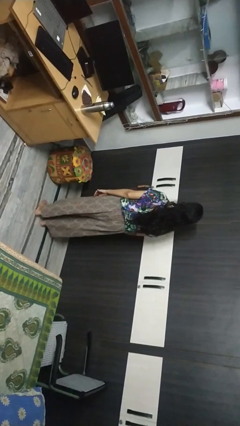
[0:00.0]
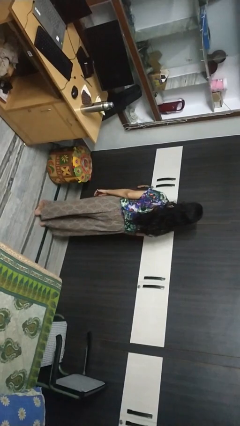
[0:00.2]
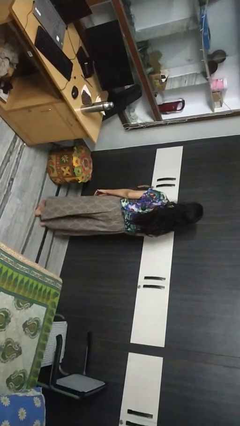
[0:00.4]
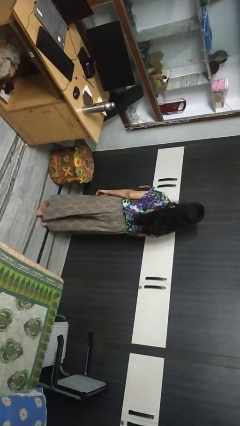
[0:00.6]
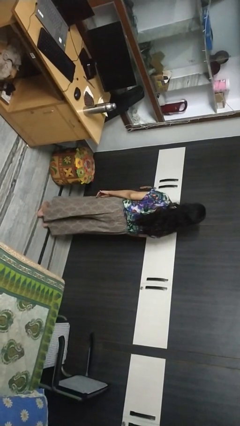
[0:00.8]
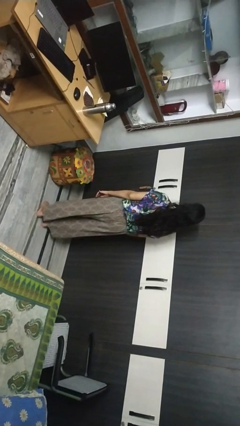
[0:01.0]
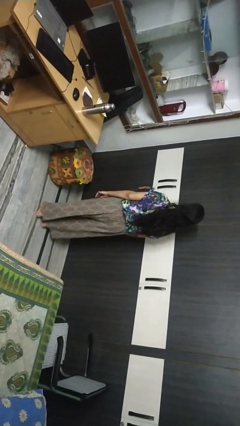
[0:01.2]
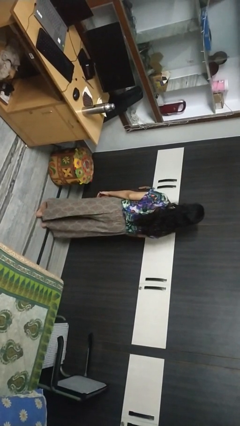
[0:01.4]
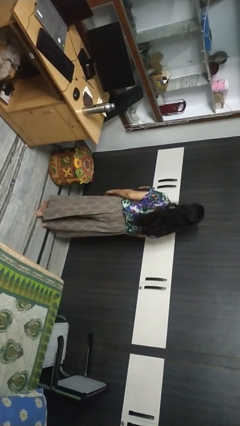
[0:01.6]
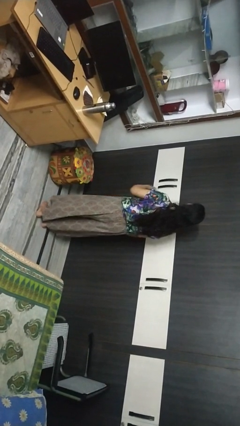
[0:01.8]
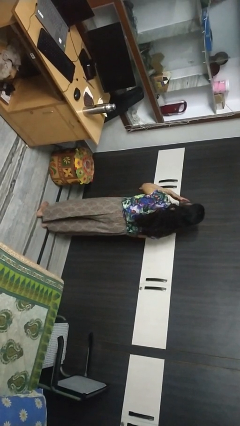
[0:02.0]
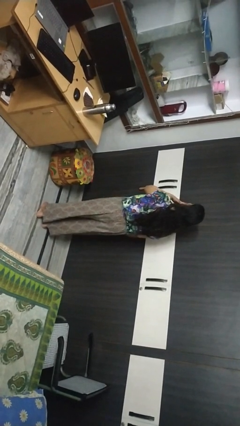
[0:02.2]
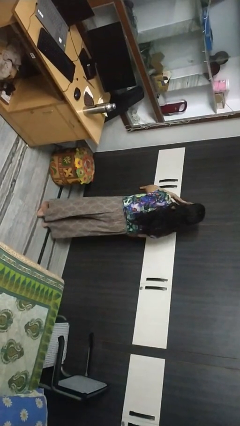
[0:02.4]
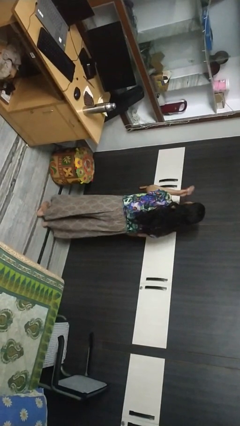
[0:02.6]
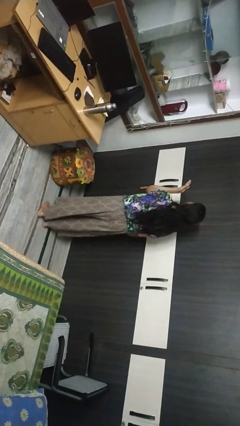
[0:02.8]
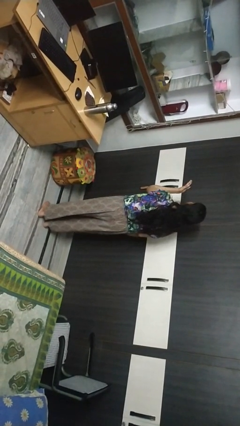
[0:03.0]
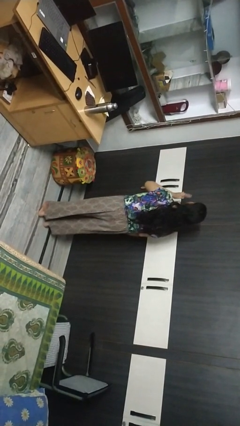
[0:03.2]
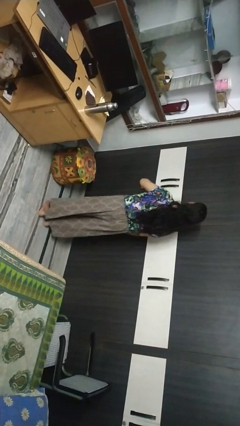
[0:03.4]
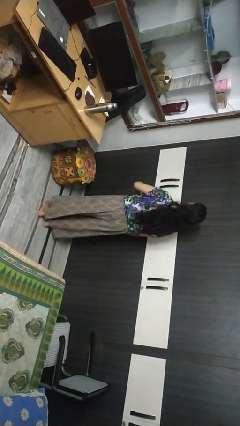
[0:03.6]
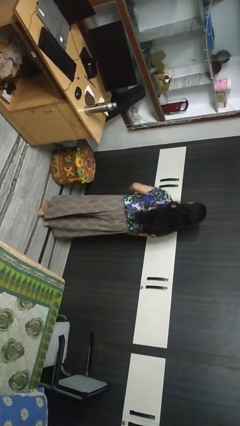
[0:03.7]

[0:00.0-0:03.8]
person gestures blow kiss

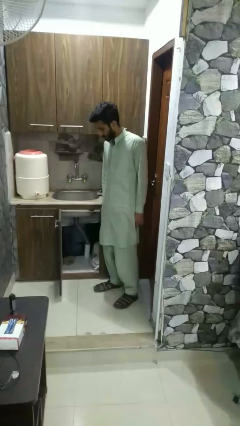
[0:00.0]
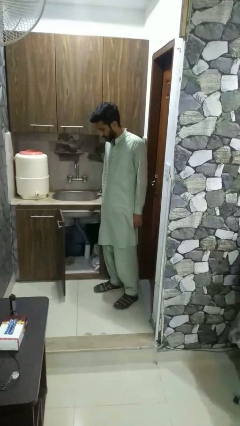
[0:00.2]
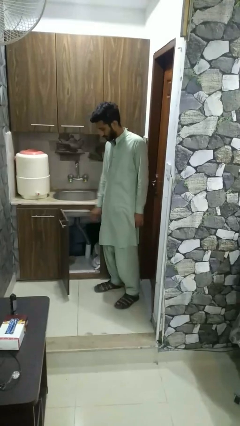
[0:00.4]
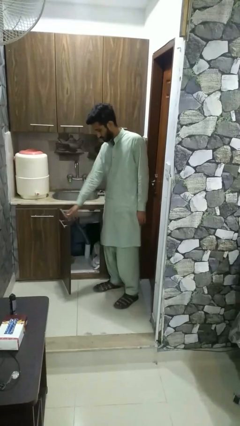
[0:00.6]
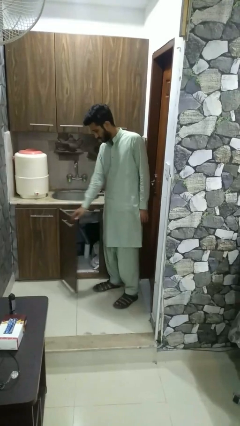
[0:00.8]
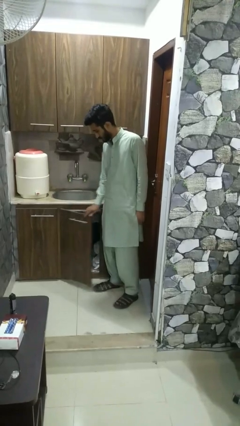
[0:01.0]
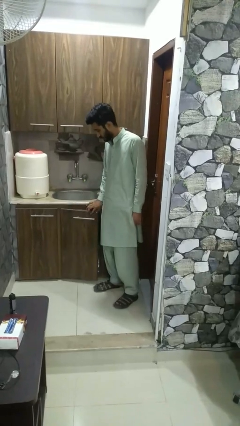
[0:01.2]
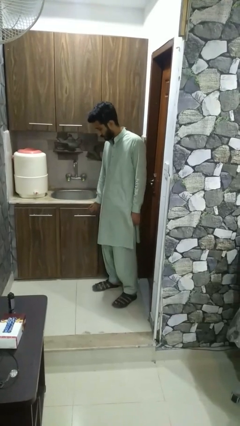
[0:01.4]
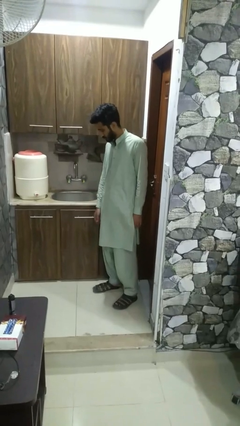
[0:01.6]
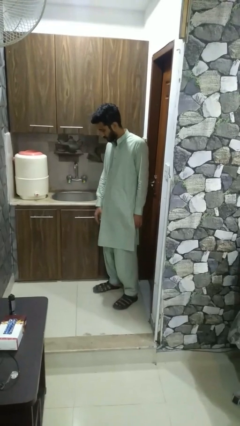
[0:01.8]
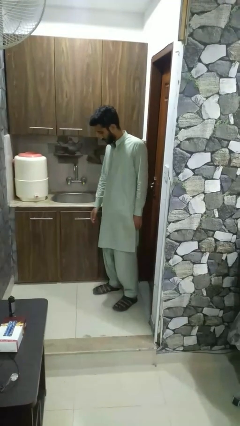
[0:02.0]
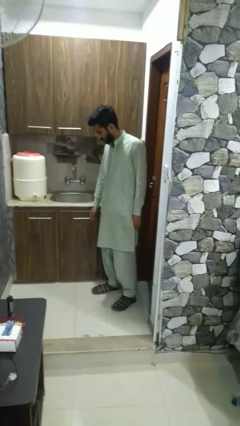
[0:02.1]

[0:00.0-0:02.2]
person closes closet door

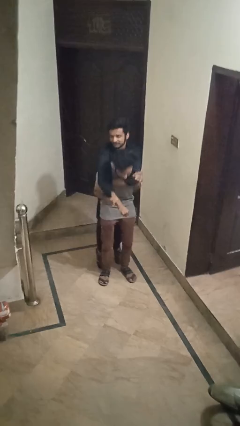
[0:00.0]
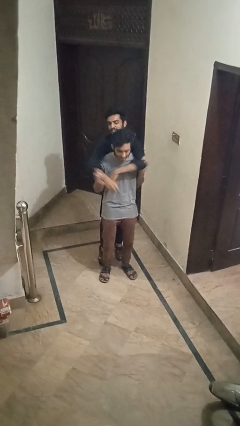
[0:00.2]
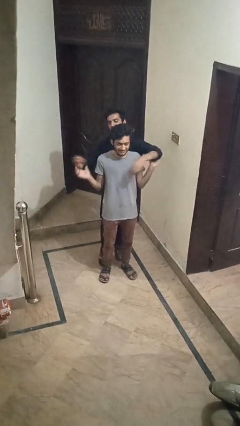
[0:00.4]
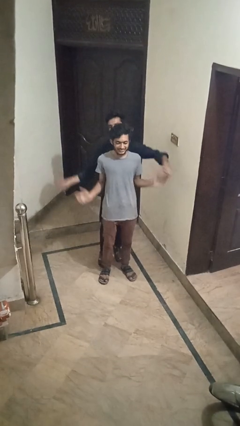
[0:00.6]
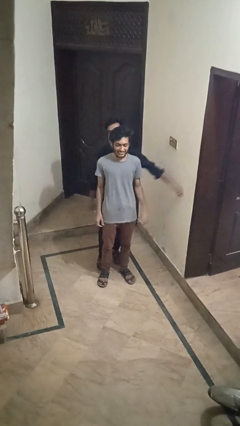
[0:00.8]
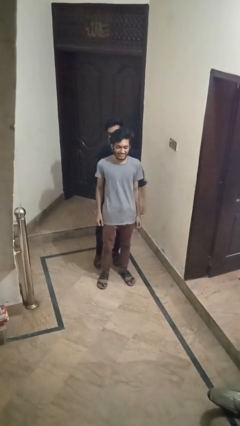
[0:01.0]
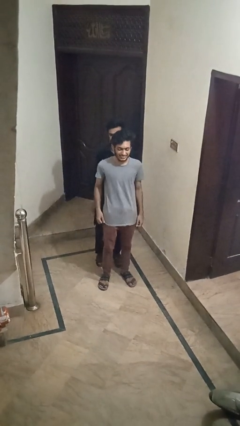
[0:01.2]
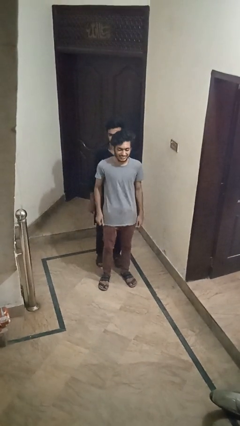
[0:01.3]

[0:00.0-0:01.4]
person puts down person

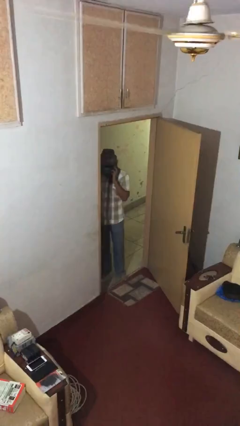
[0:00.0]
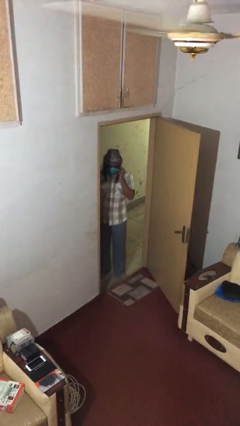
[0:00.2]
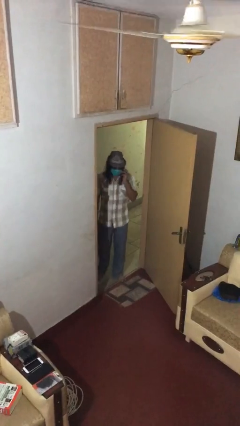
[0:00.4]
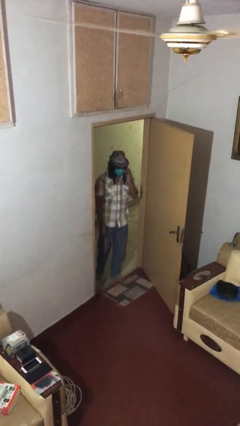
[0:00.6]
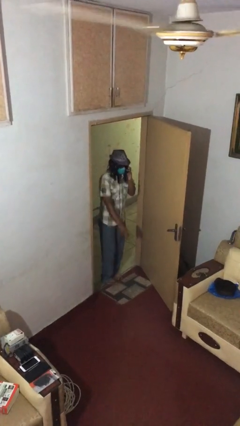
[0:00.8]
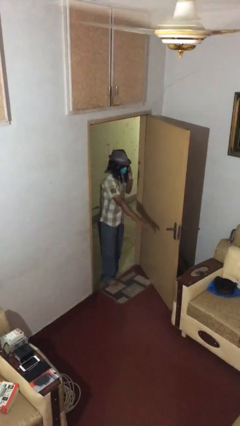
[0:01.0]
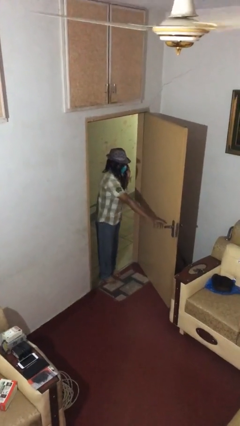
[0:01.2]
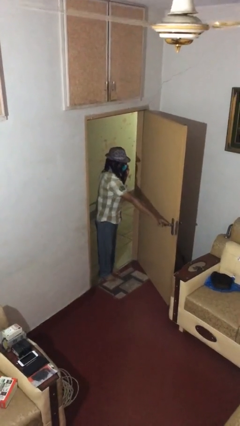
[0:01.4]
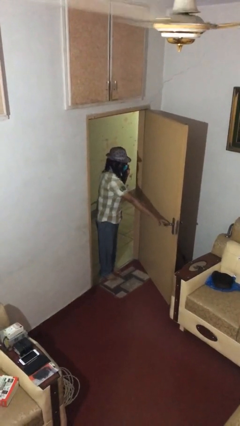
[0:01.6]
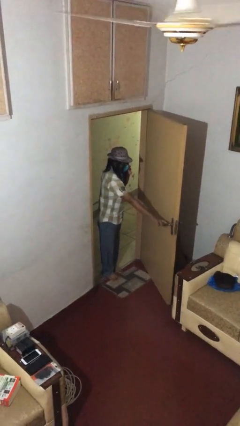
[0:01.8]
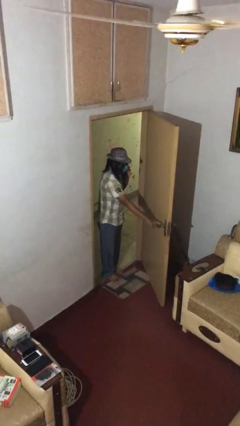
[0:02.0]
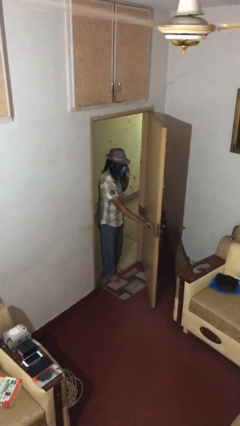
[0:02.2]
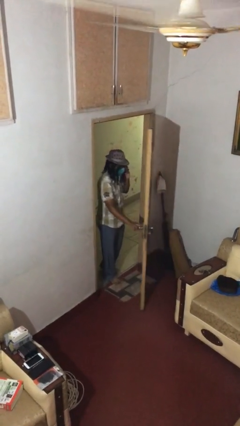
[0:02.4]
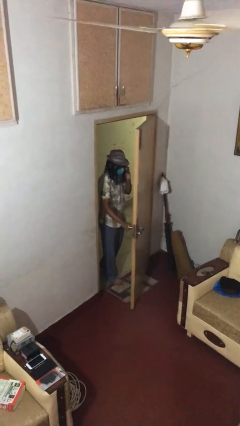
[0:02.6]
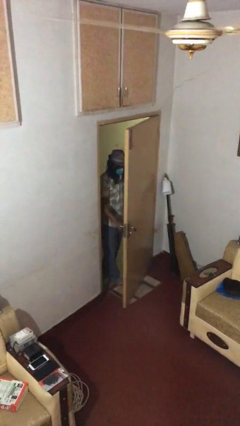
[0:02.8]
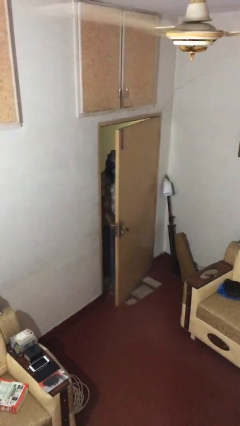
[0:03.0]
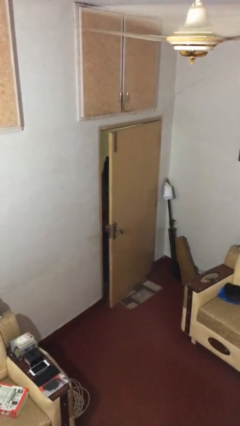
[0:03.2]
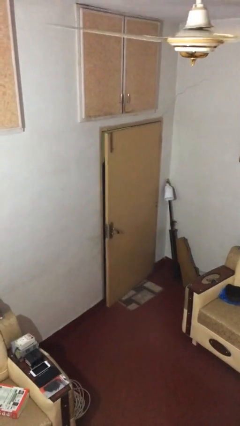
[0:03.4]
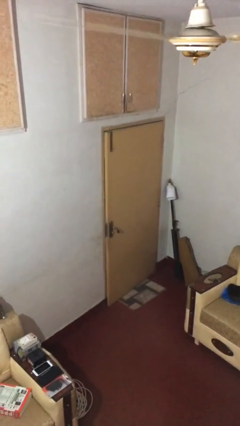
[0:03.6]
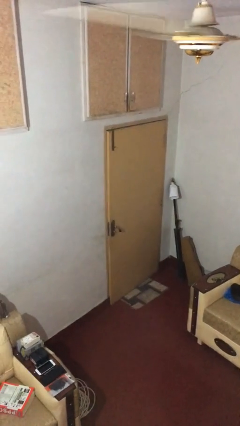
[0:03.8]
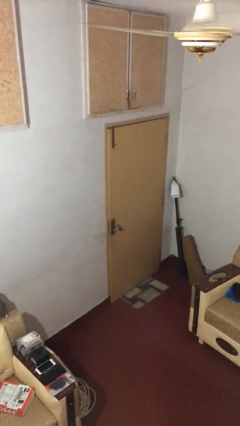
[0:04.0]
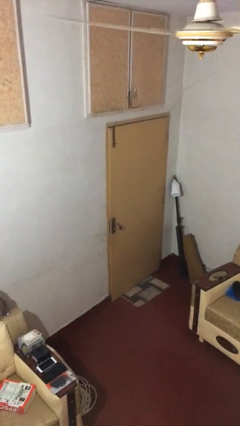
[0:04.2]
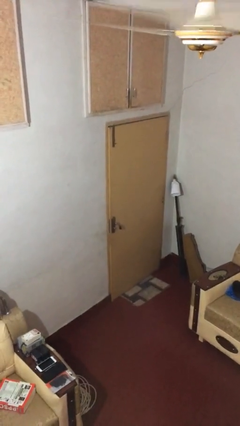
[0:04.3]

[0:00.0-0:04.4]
person closes facility door

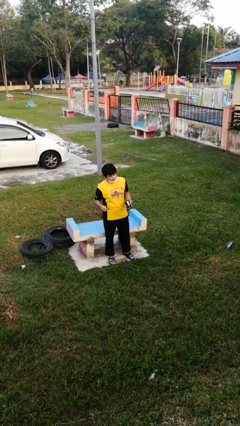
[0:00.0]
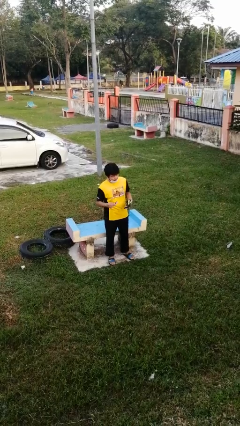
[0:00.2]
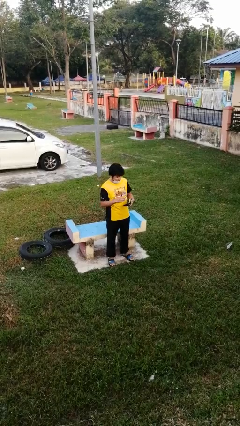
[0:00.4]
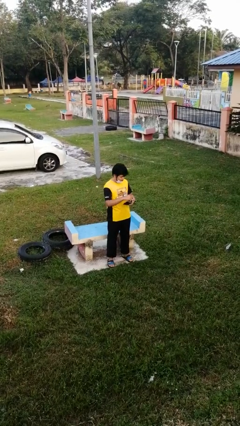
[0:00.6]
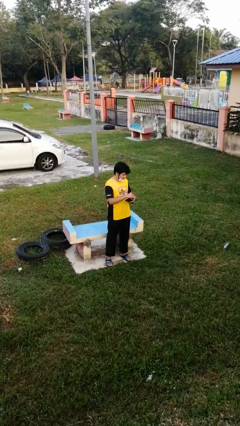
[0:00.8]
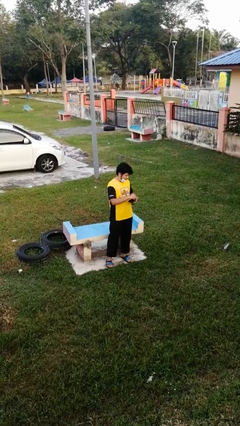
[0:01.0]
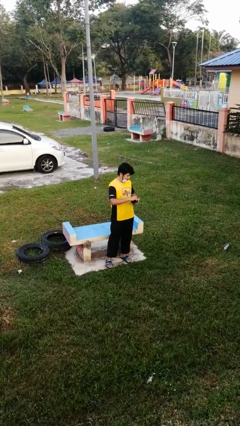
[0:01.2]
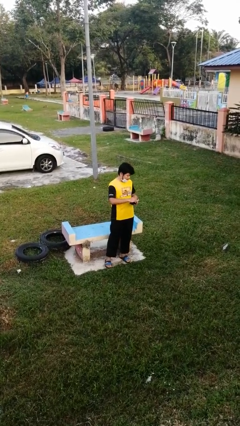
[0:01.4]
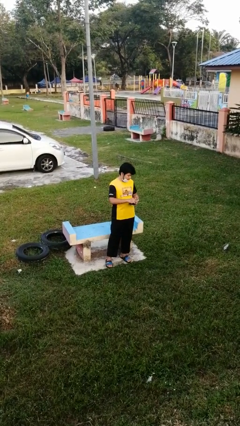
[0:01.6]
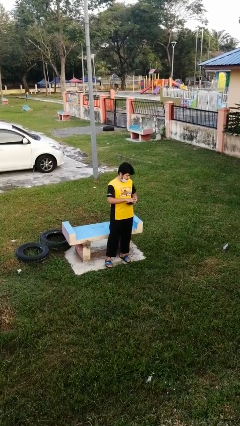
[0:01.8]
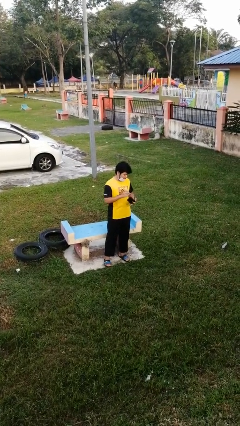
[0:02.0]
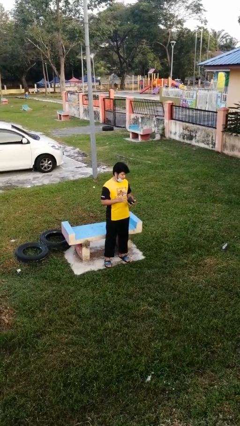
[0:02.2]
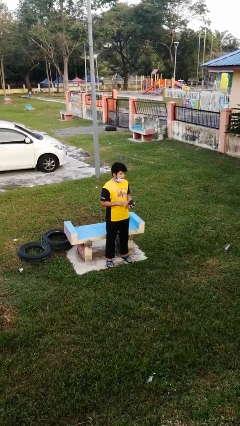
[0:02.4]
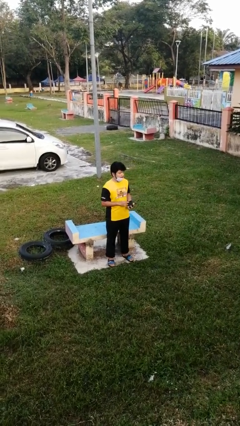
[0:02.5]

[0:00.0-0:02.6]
person puts object into purse

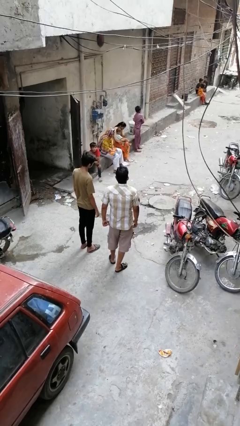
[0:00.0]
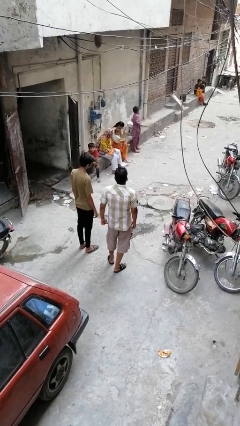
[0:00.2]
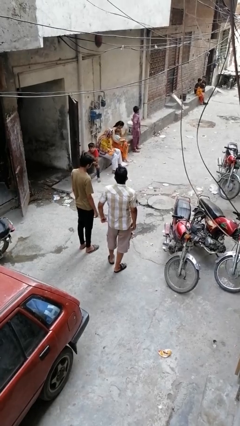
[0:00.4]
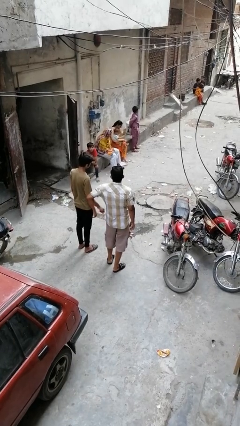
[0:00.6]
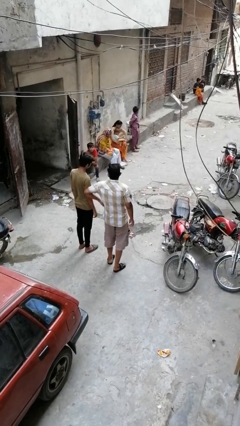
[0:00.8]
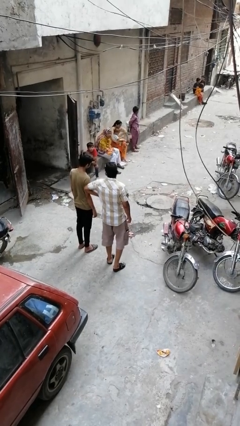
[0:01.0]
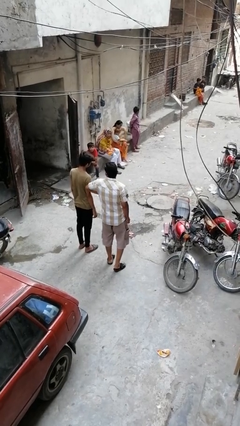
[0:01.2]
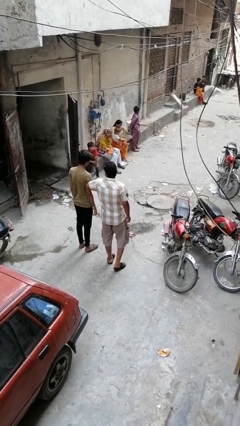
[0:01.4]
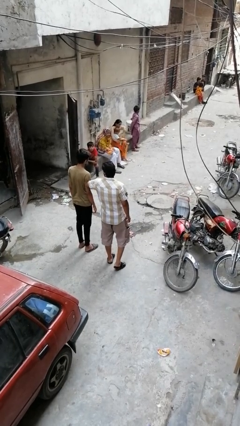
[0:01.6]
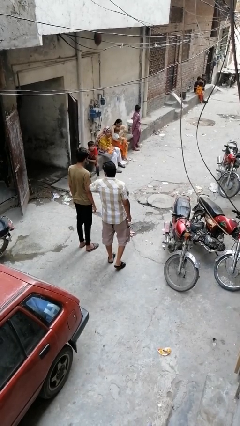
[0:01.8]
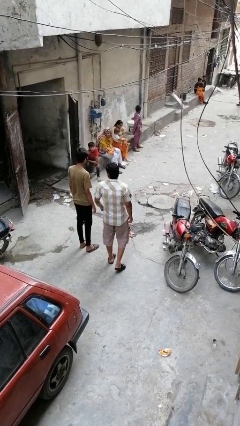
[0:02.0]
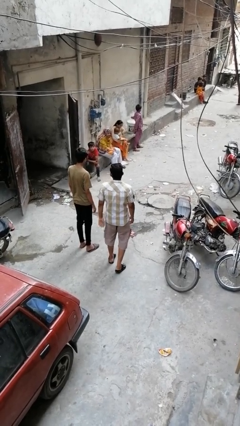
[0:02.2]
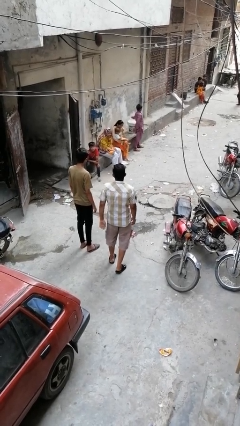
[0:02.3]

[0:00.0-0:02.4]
person nudges person with elbow

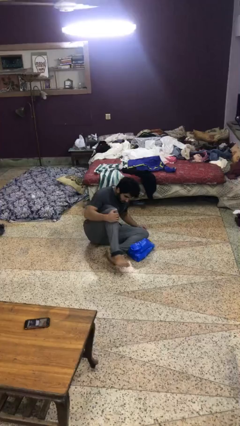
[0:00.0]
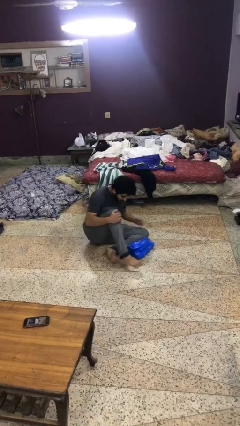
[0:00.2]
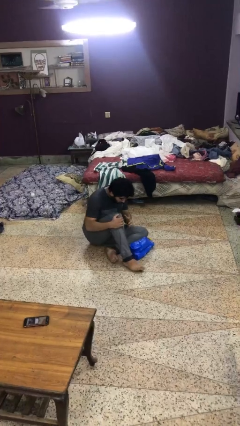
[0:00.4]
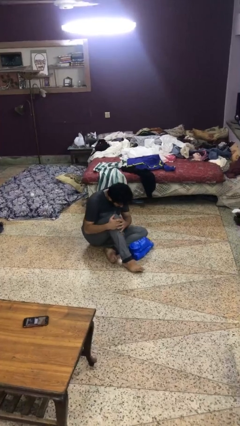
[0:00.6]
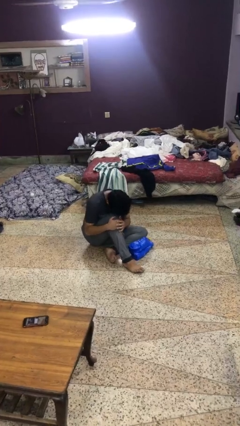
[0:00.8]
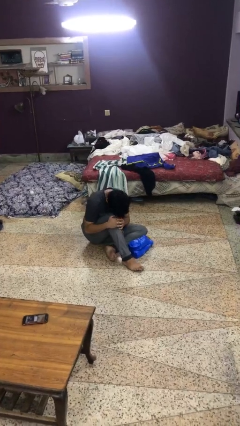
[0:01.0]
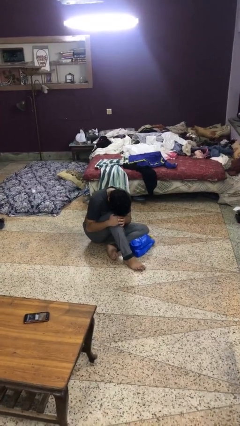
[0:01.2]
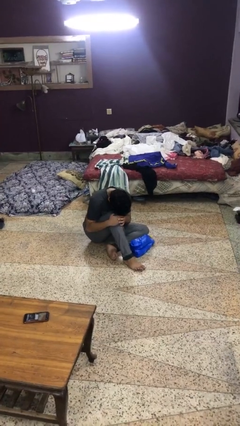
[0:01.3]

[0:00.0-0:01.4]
person lies down on floor
